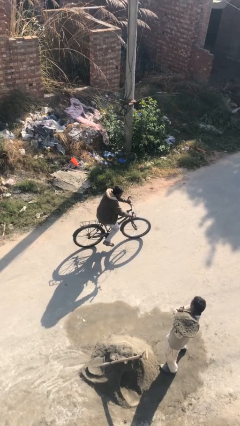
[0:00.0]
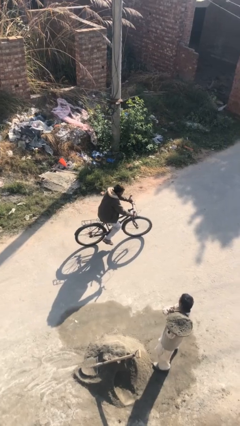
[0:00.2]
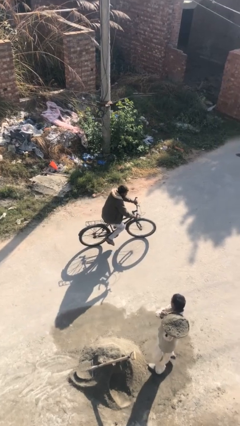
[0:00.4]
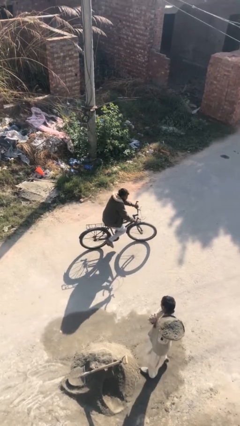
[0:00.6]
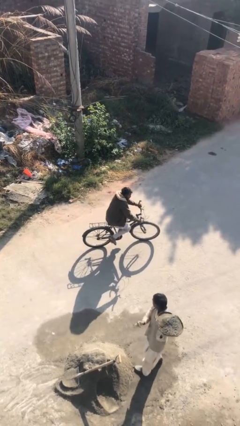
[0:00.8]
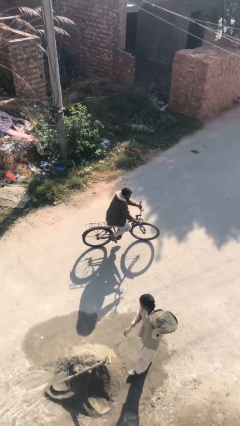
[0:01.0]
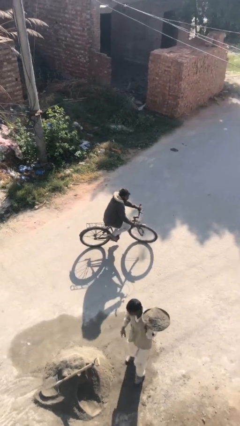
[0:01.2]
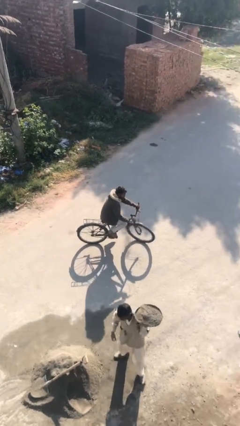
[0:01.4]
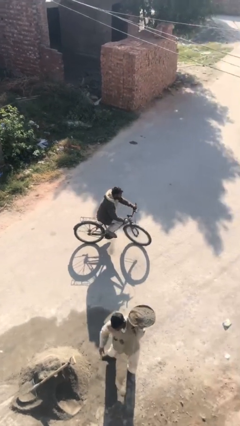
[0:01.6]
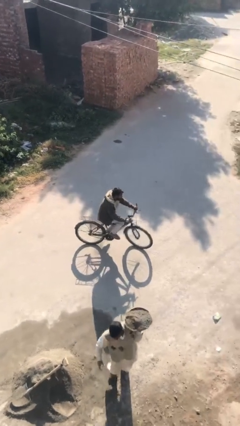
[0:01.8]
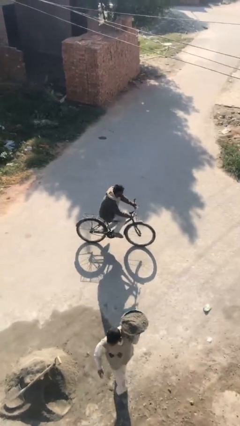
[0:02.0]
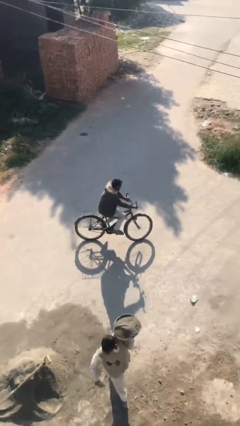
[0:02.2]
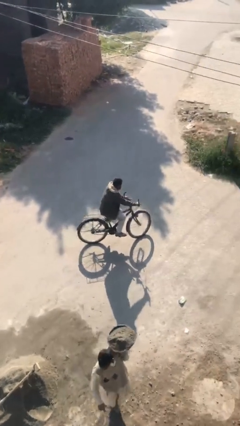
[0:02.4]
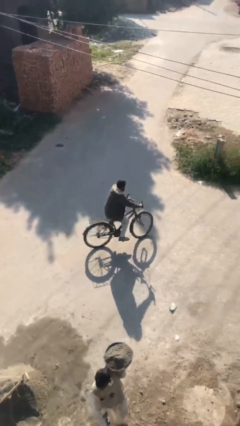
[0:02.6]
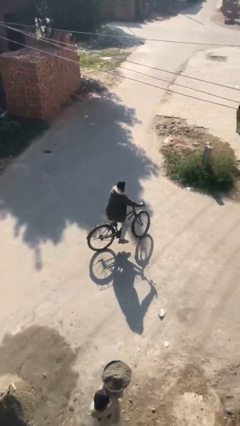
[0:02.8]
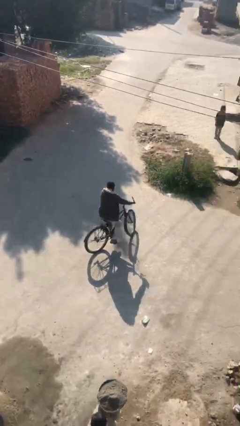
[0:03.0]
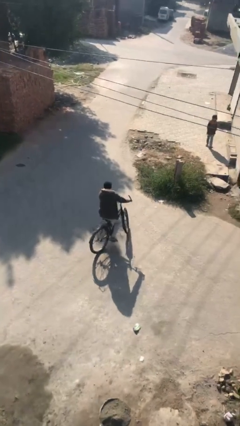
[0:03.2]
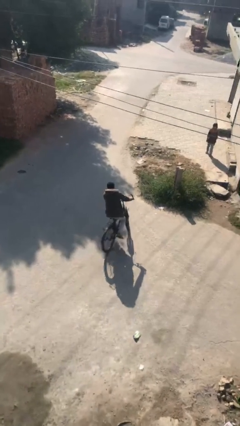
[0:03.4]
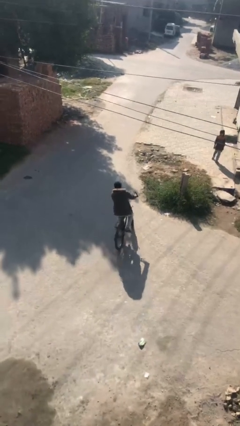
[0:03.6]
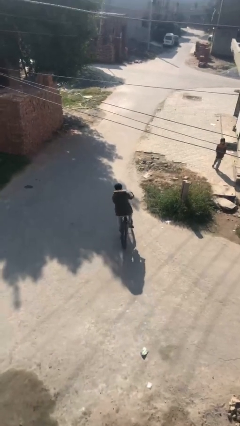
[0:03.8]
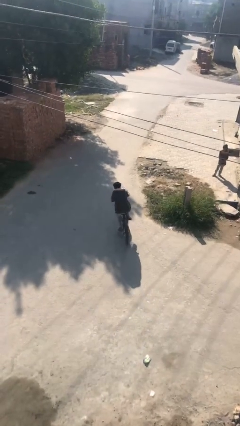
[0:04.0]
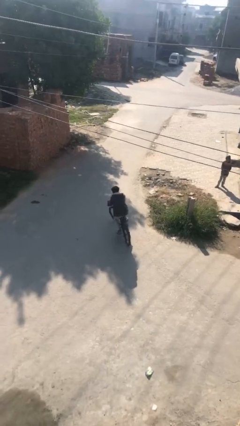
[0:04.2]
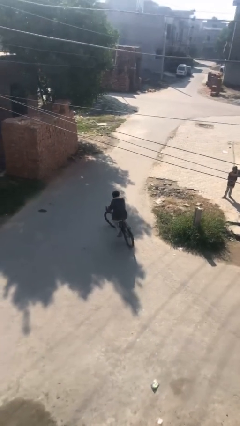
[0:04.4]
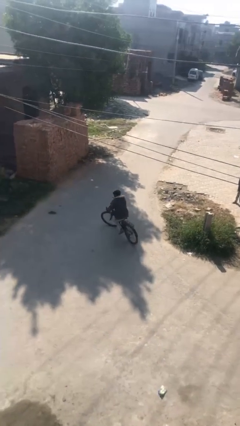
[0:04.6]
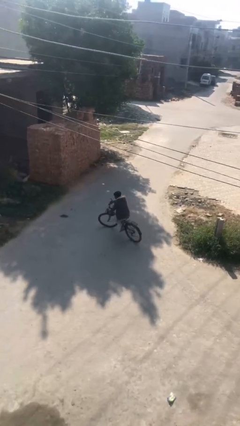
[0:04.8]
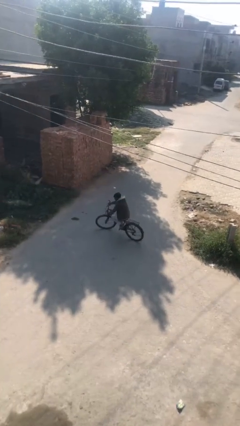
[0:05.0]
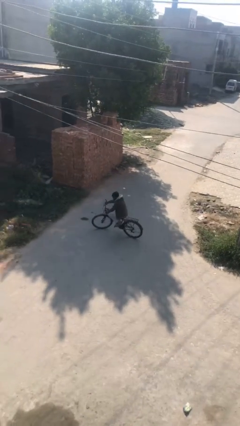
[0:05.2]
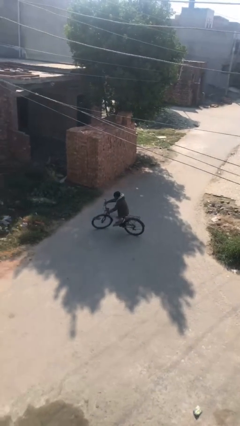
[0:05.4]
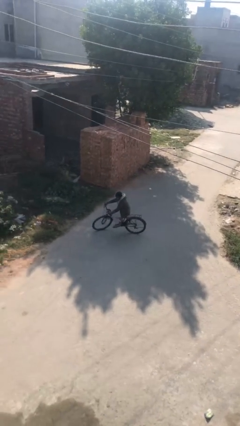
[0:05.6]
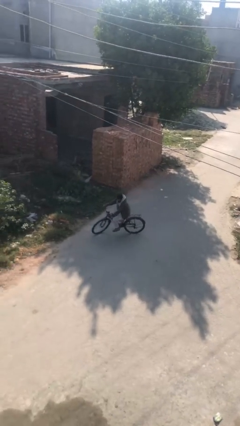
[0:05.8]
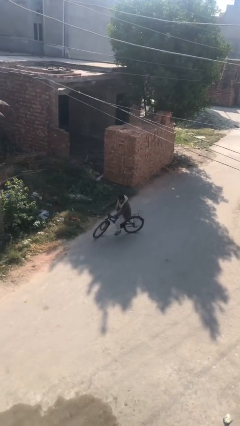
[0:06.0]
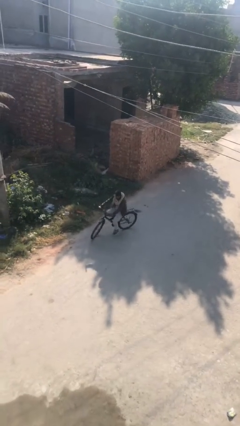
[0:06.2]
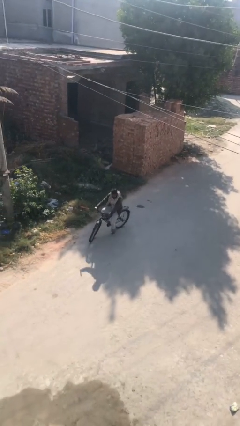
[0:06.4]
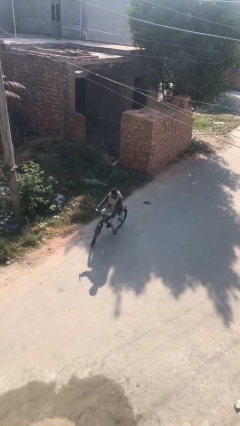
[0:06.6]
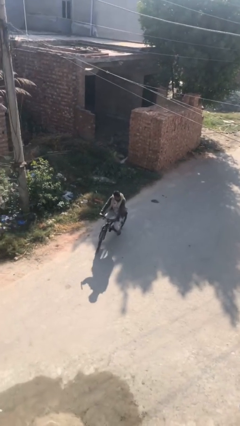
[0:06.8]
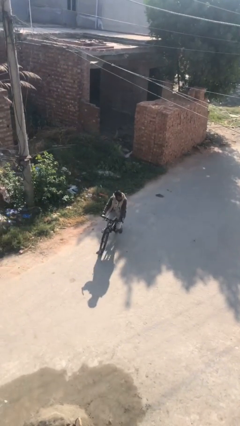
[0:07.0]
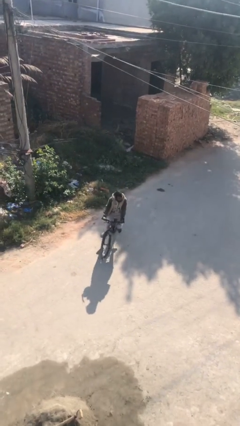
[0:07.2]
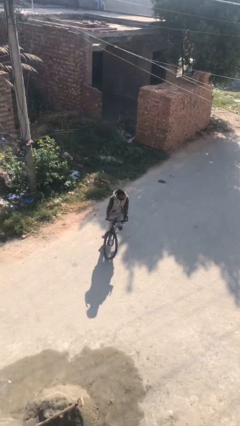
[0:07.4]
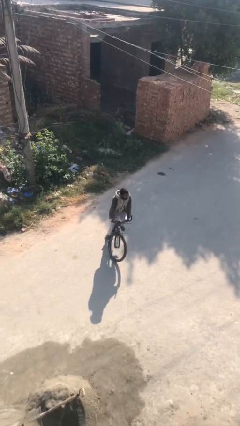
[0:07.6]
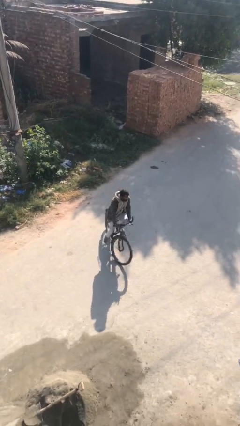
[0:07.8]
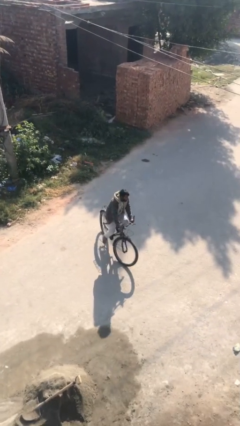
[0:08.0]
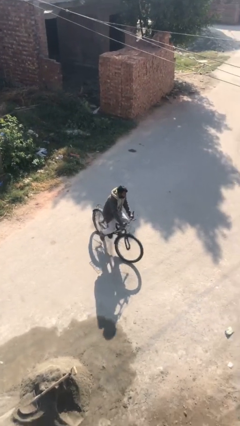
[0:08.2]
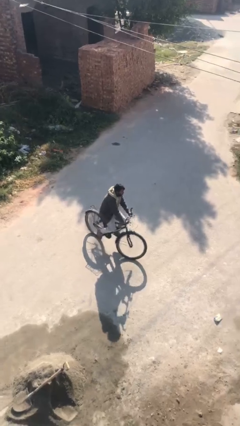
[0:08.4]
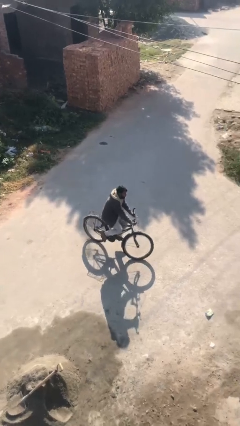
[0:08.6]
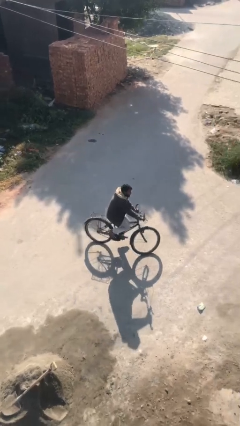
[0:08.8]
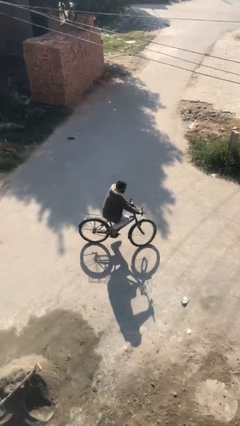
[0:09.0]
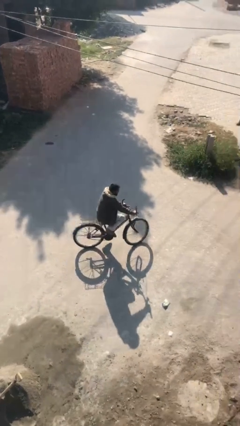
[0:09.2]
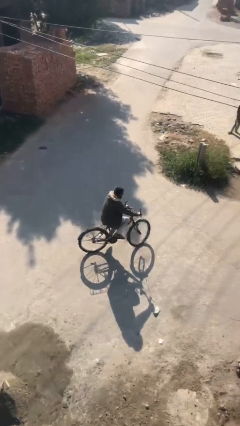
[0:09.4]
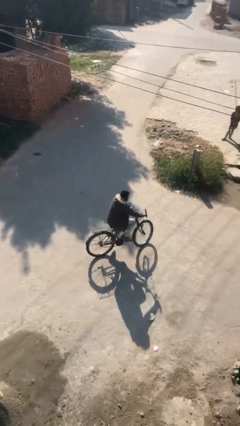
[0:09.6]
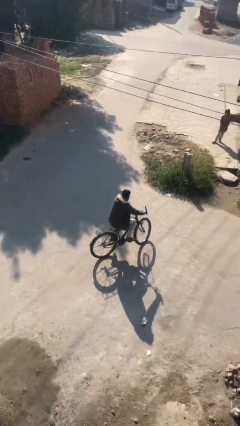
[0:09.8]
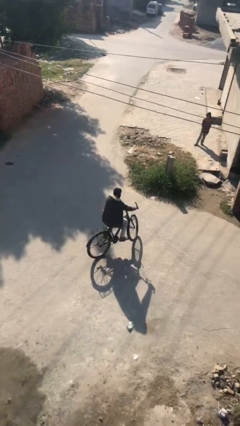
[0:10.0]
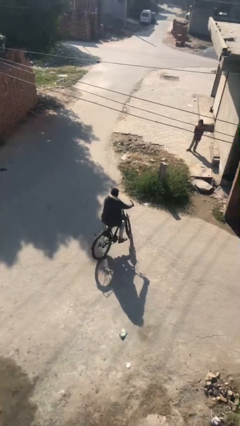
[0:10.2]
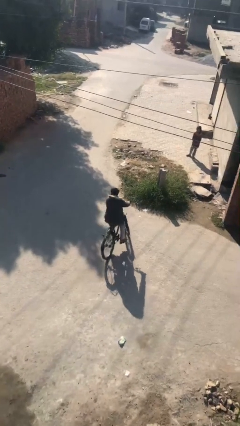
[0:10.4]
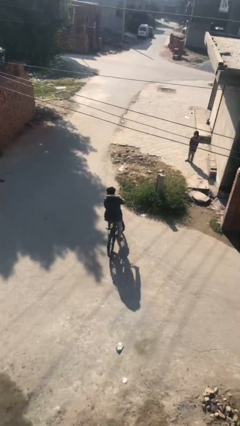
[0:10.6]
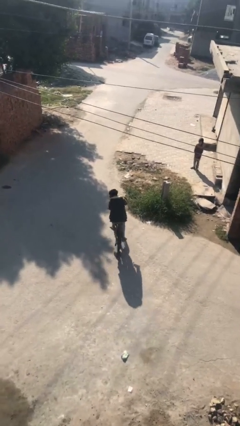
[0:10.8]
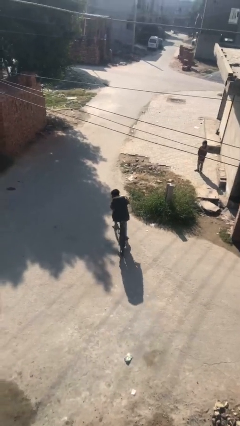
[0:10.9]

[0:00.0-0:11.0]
person rides bicycle

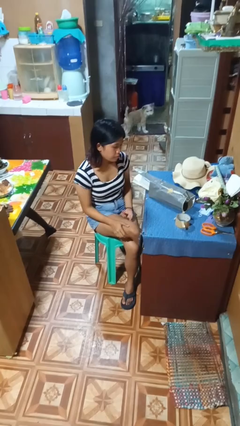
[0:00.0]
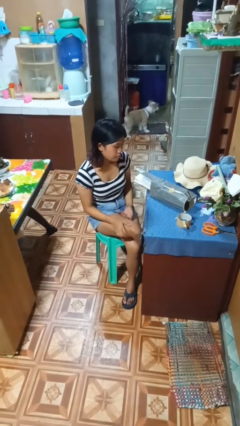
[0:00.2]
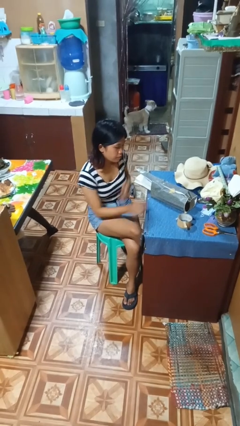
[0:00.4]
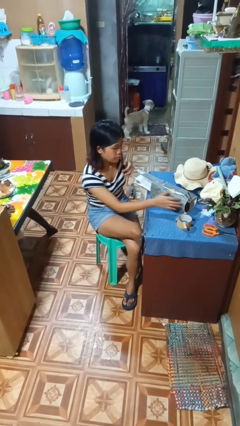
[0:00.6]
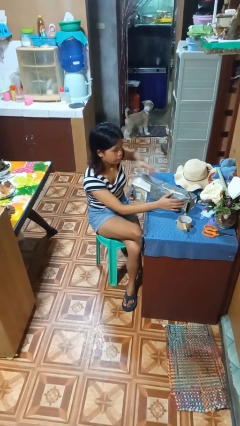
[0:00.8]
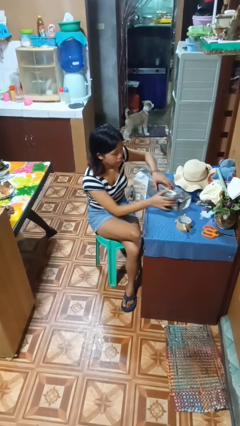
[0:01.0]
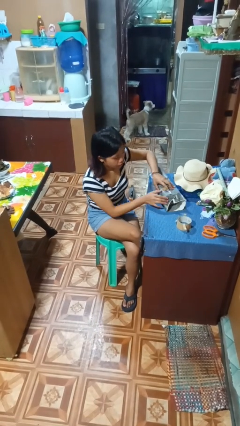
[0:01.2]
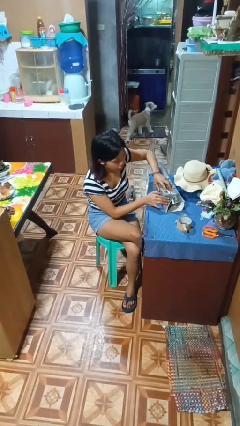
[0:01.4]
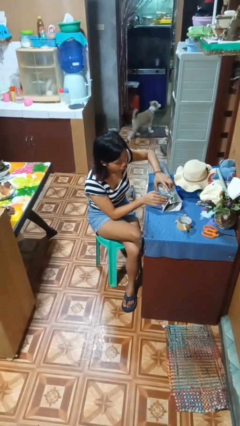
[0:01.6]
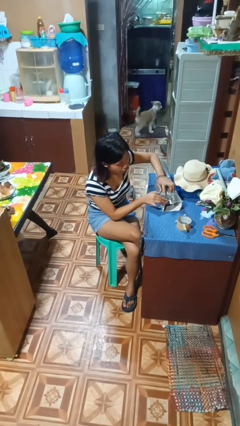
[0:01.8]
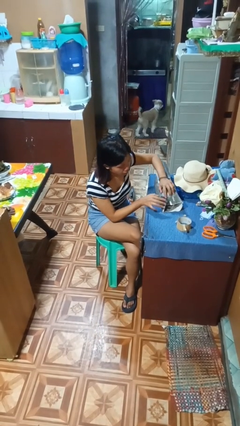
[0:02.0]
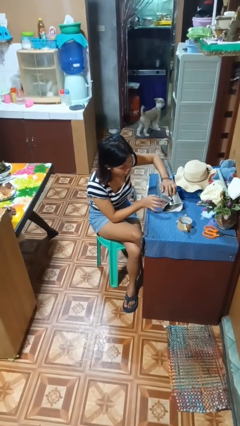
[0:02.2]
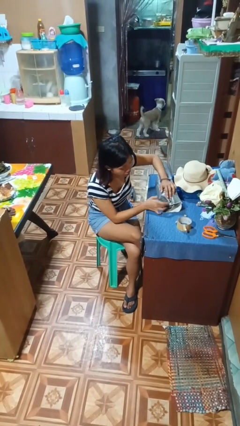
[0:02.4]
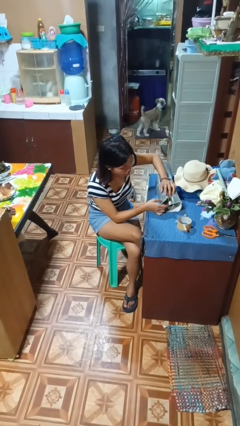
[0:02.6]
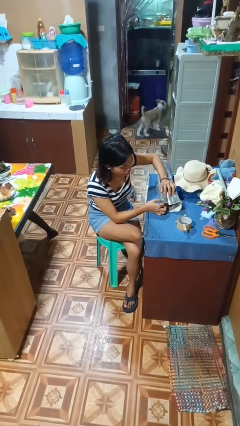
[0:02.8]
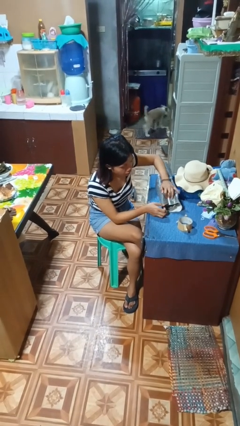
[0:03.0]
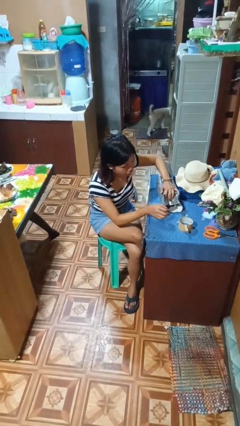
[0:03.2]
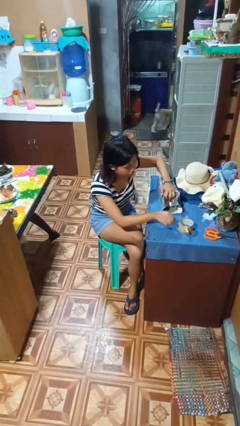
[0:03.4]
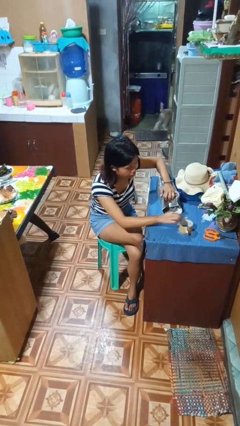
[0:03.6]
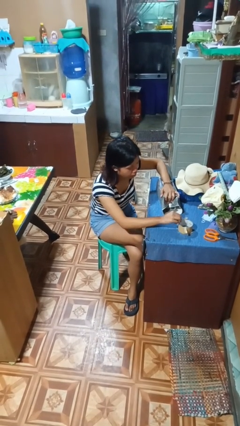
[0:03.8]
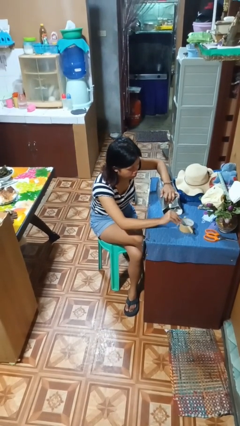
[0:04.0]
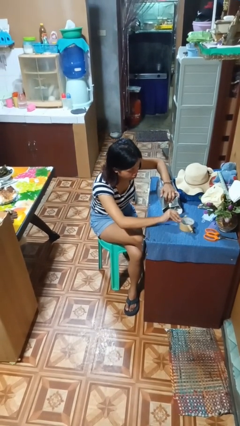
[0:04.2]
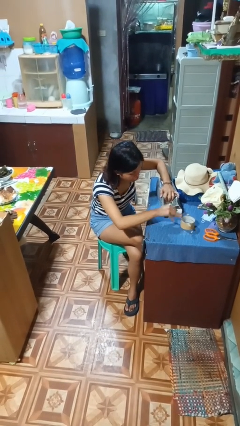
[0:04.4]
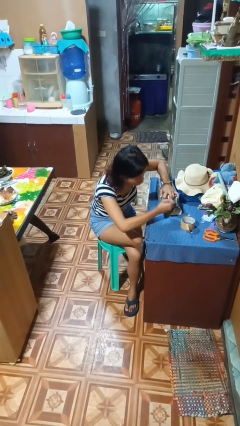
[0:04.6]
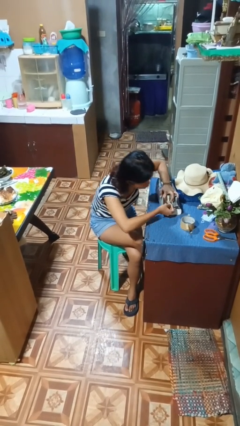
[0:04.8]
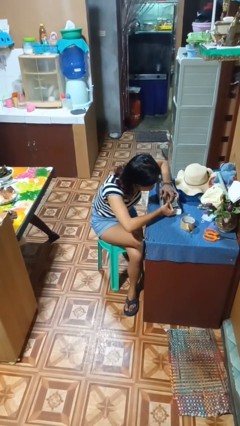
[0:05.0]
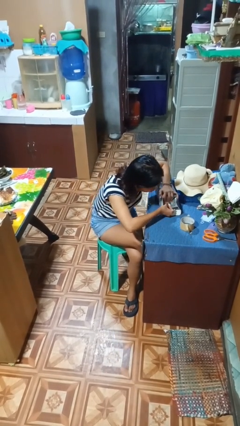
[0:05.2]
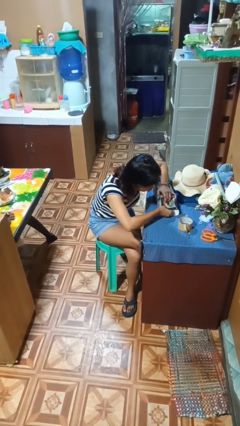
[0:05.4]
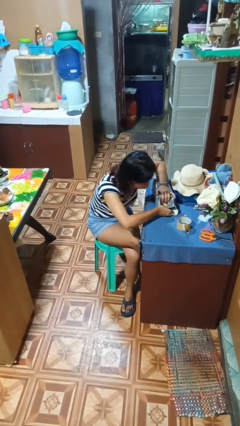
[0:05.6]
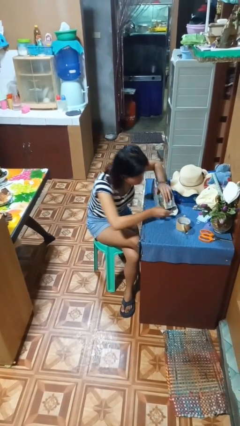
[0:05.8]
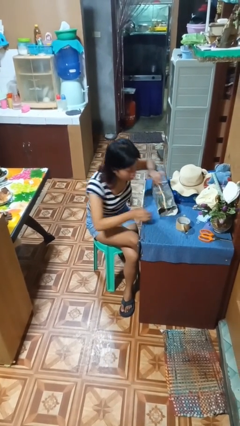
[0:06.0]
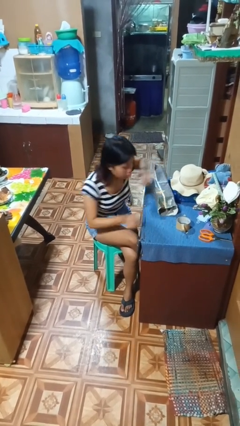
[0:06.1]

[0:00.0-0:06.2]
person wraps box

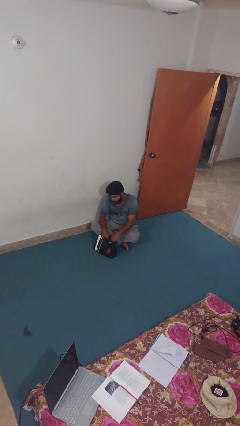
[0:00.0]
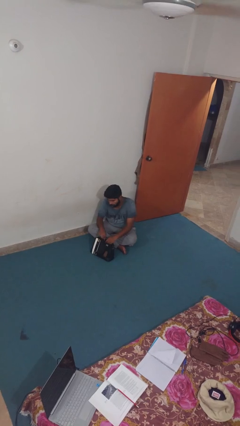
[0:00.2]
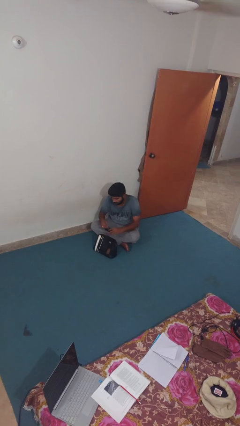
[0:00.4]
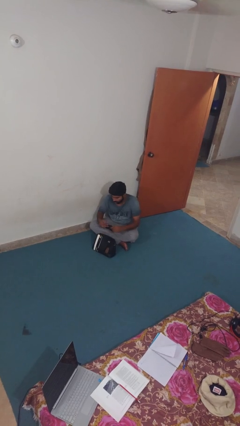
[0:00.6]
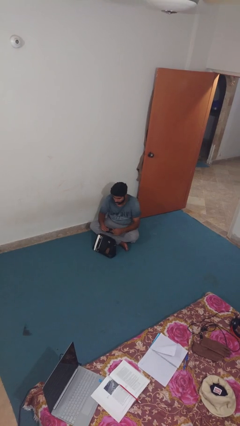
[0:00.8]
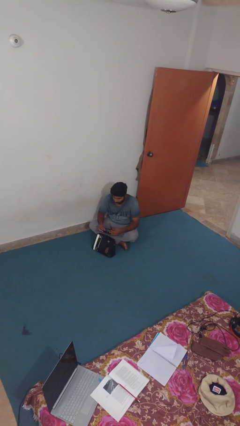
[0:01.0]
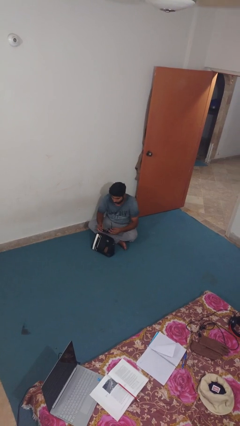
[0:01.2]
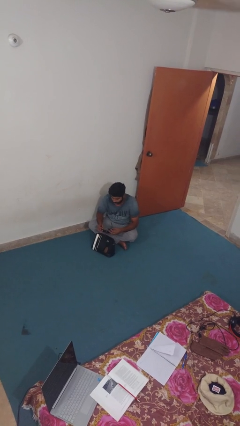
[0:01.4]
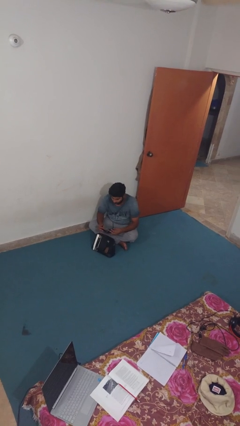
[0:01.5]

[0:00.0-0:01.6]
person takes object from purse
